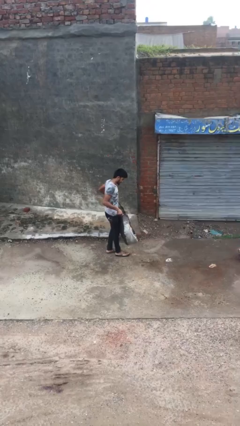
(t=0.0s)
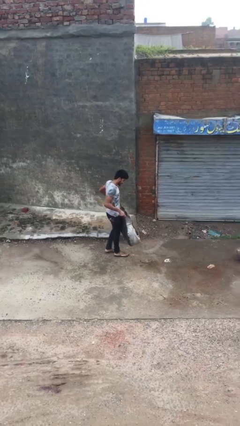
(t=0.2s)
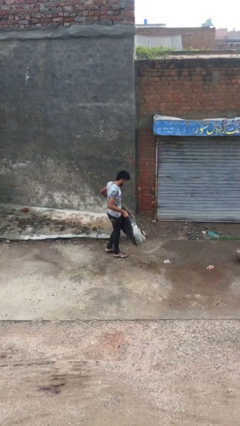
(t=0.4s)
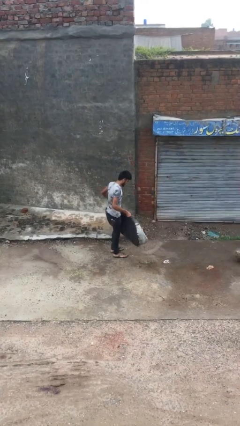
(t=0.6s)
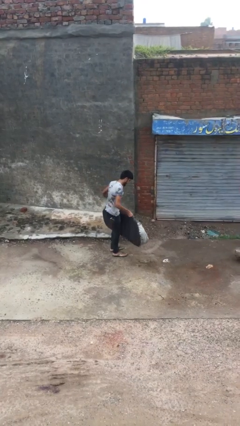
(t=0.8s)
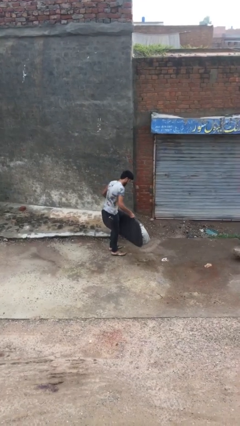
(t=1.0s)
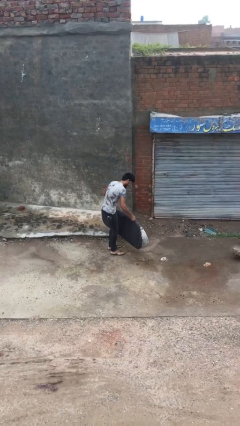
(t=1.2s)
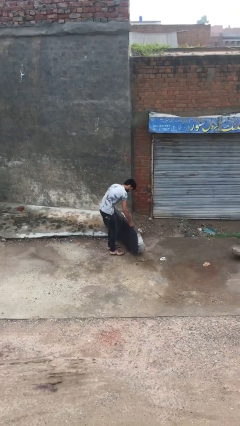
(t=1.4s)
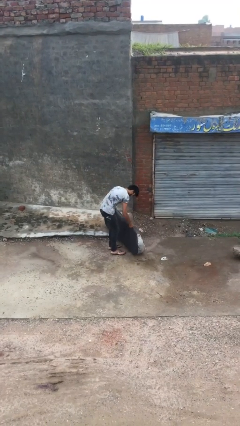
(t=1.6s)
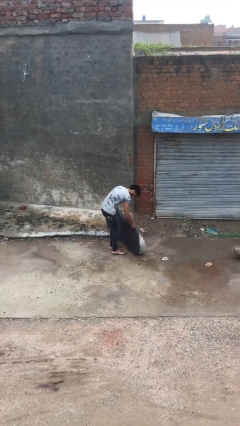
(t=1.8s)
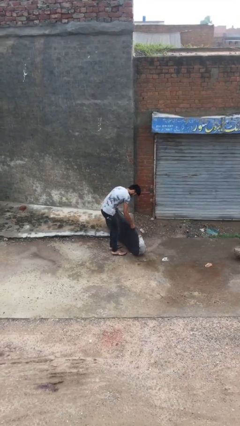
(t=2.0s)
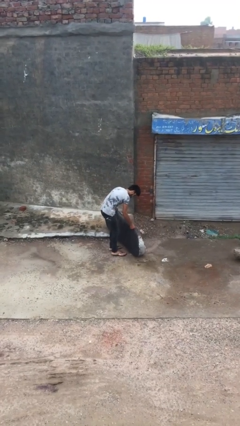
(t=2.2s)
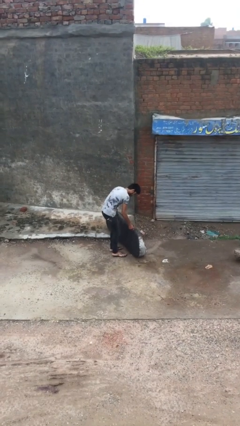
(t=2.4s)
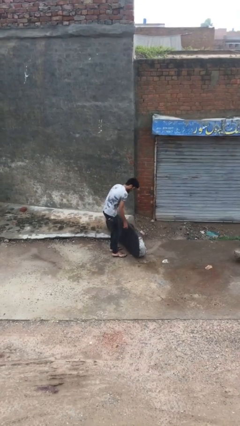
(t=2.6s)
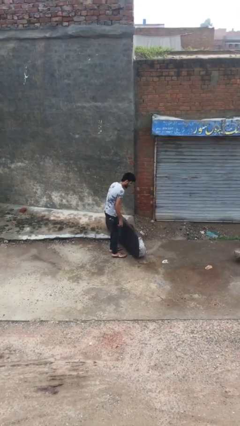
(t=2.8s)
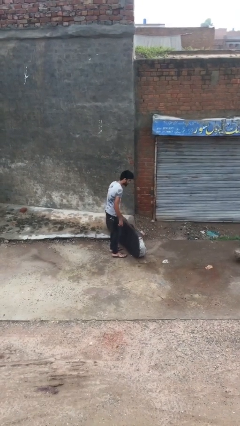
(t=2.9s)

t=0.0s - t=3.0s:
person puts down object on floor

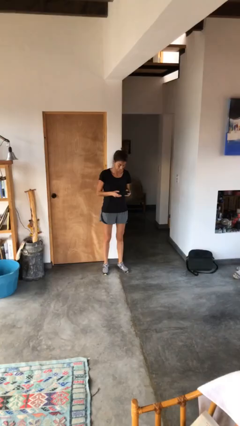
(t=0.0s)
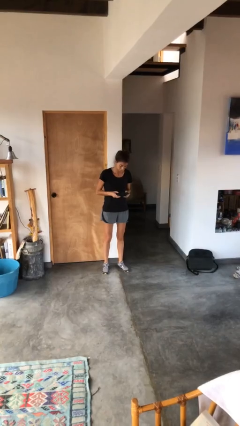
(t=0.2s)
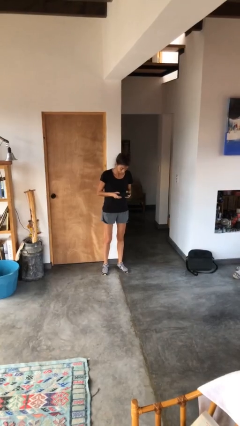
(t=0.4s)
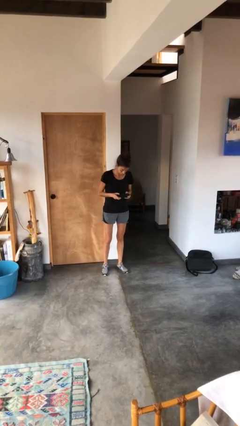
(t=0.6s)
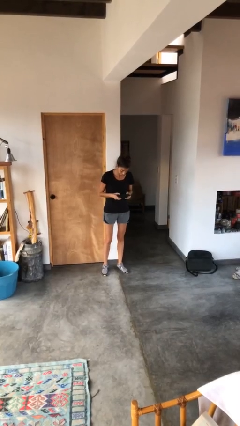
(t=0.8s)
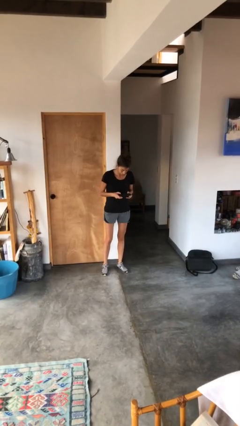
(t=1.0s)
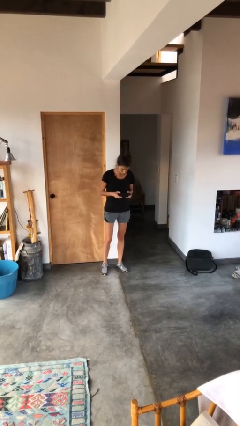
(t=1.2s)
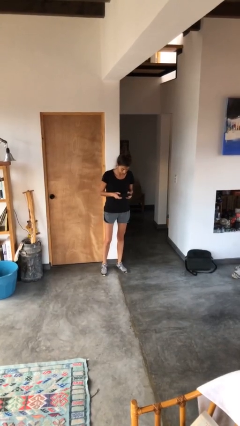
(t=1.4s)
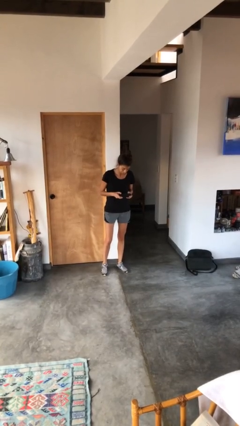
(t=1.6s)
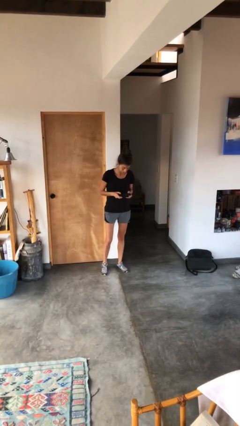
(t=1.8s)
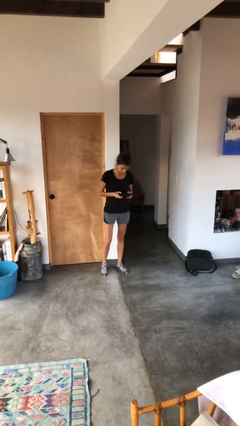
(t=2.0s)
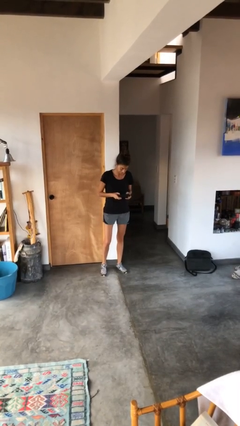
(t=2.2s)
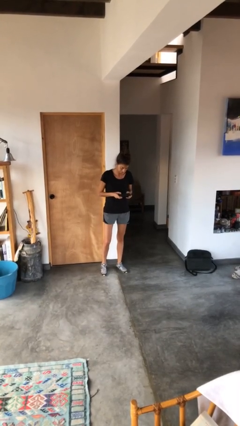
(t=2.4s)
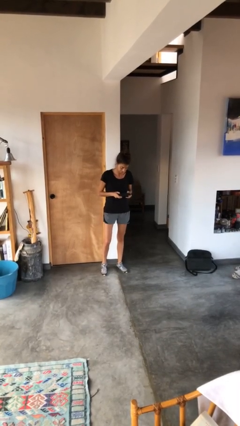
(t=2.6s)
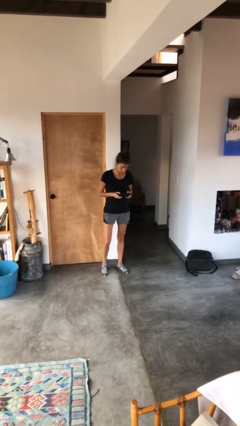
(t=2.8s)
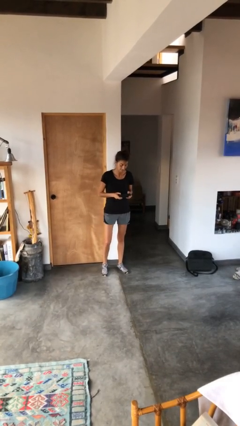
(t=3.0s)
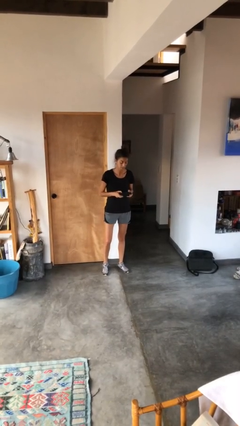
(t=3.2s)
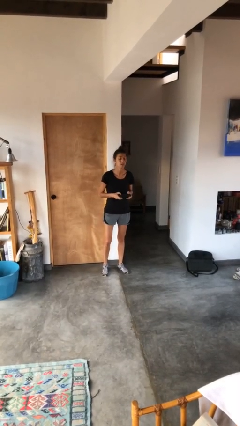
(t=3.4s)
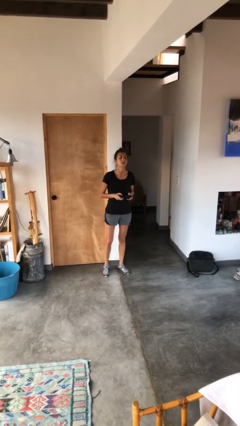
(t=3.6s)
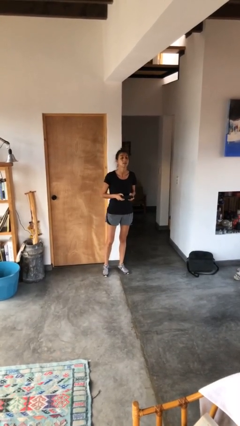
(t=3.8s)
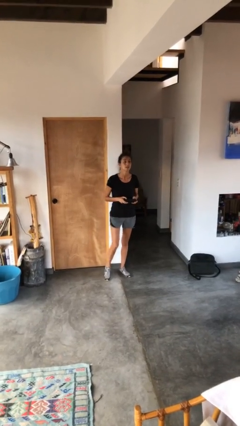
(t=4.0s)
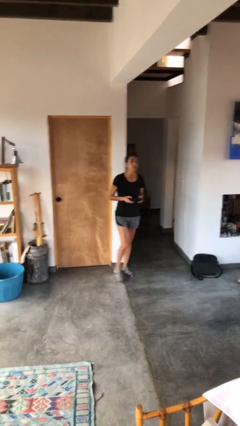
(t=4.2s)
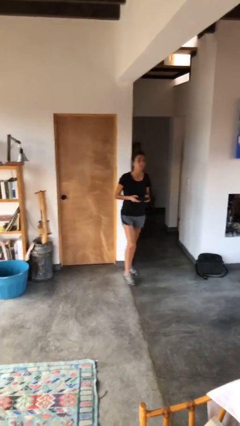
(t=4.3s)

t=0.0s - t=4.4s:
person interacts with handheld game

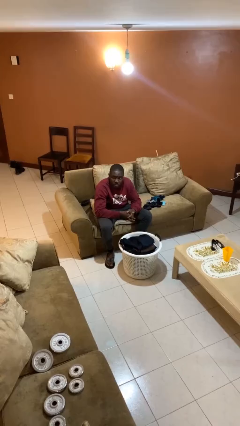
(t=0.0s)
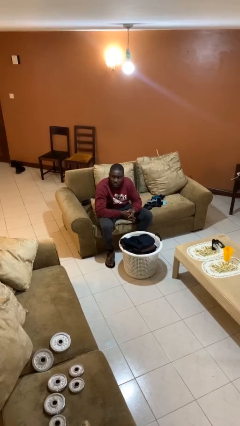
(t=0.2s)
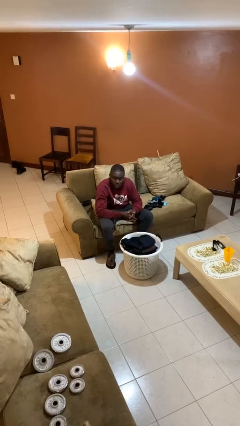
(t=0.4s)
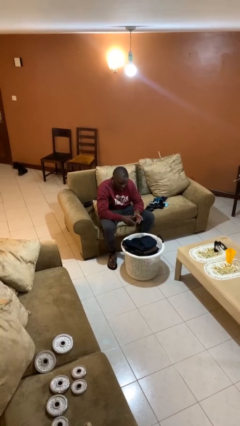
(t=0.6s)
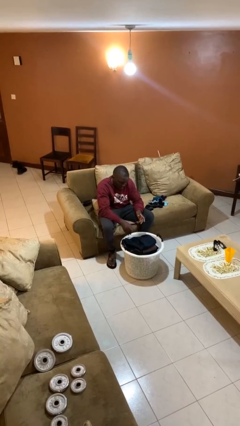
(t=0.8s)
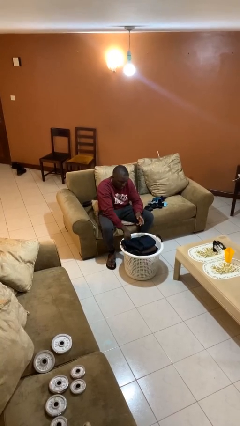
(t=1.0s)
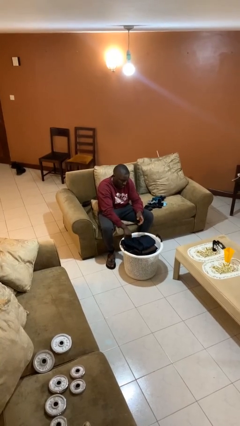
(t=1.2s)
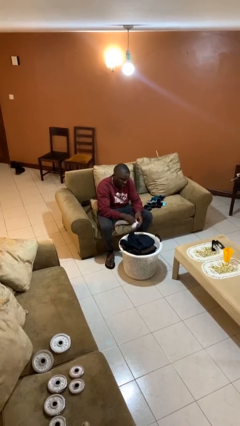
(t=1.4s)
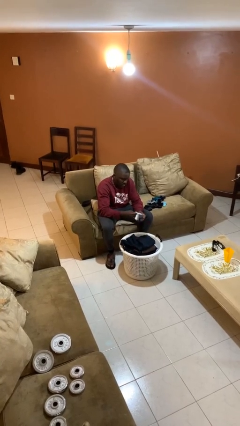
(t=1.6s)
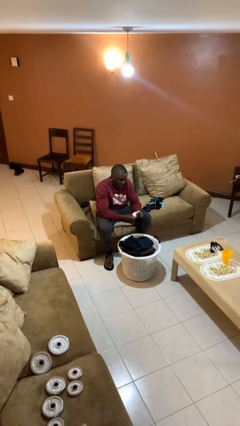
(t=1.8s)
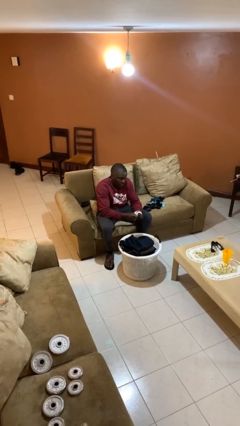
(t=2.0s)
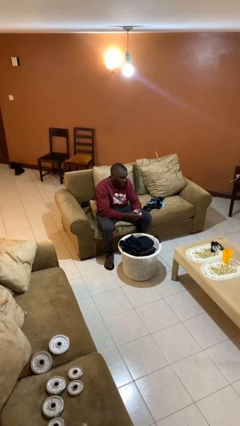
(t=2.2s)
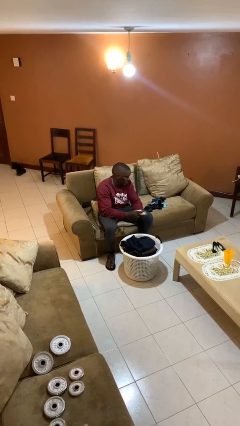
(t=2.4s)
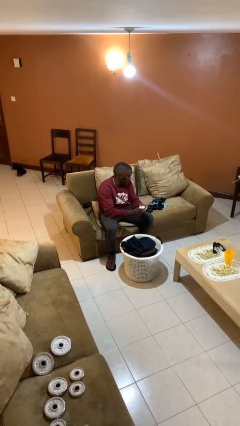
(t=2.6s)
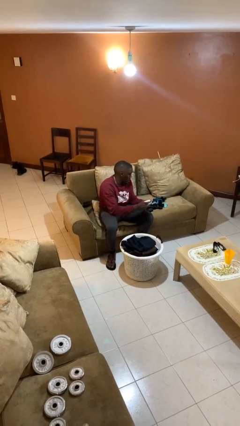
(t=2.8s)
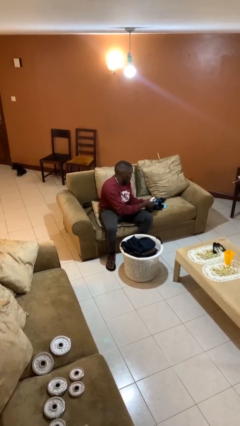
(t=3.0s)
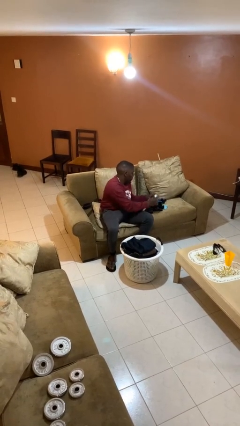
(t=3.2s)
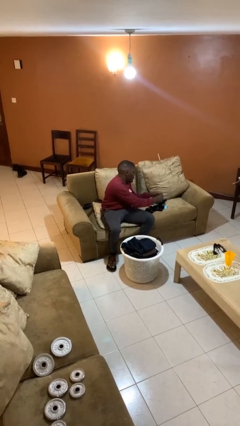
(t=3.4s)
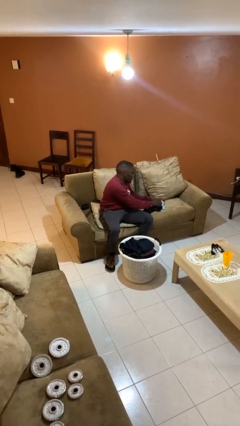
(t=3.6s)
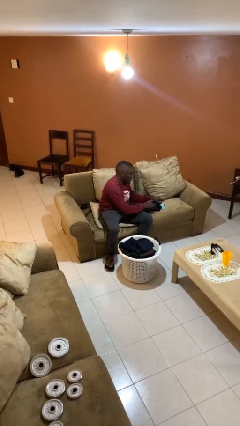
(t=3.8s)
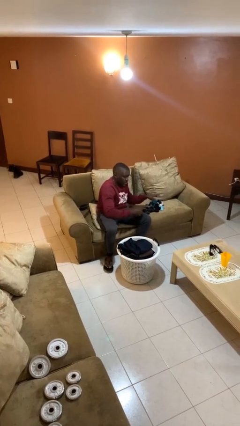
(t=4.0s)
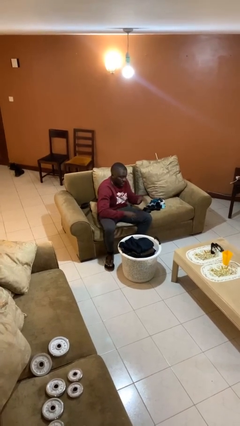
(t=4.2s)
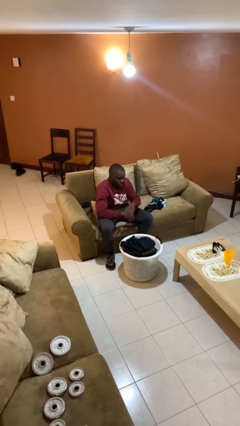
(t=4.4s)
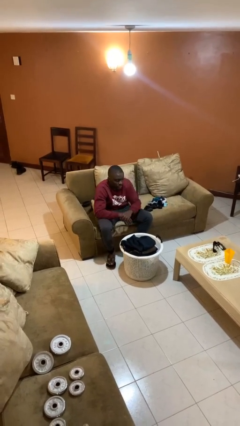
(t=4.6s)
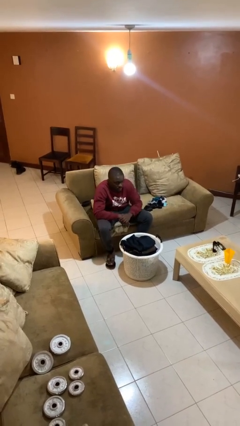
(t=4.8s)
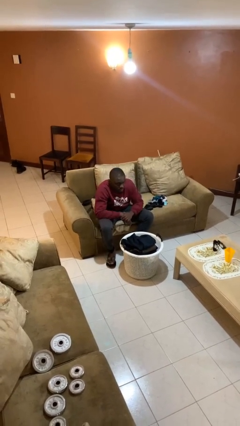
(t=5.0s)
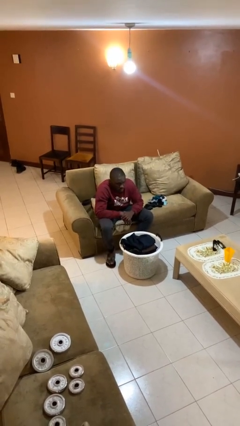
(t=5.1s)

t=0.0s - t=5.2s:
person folds socks

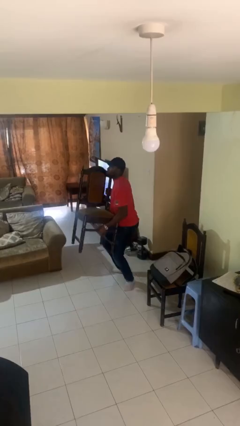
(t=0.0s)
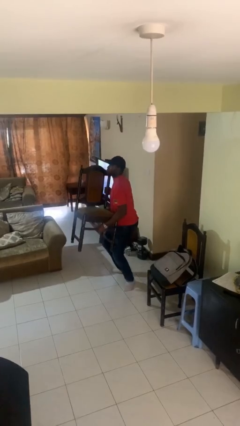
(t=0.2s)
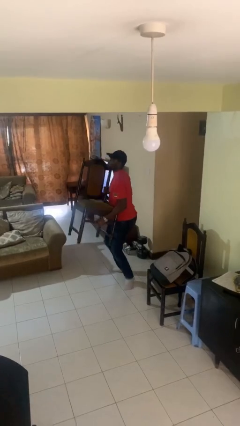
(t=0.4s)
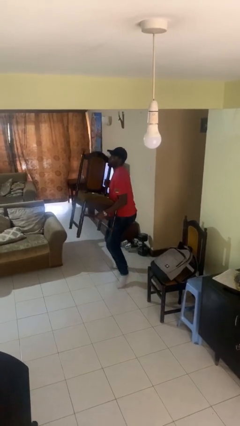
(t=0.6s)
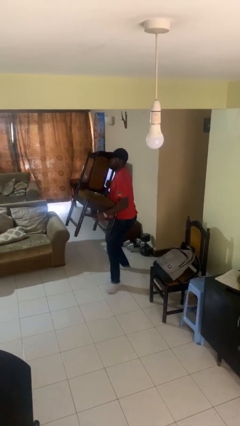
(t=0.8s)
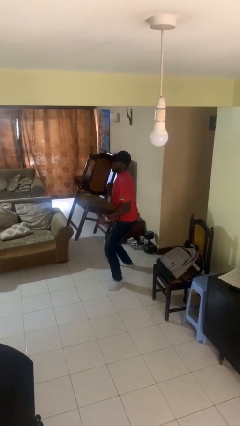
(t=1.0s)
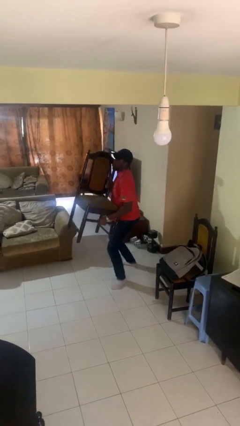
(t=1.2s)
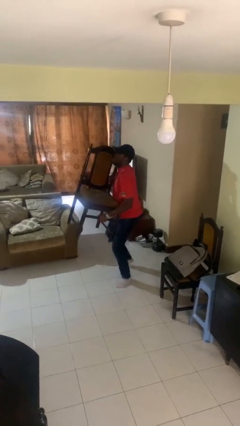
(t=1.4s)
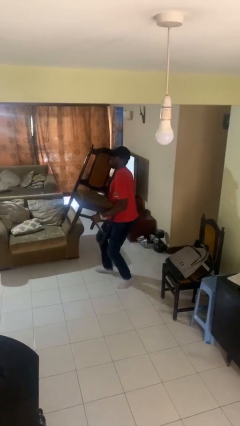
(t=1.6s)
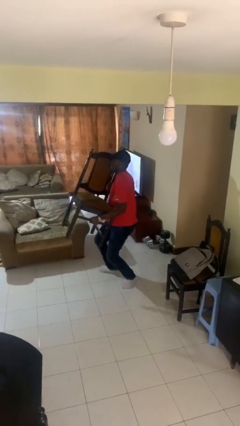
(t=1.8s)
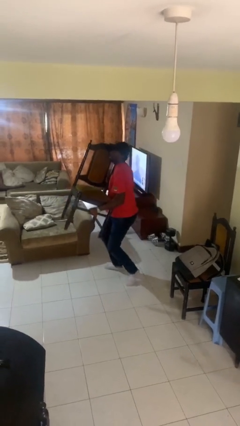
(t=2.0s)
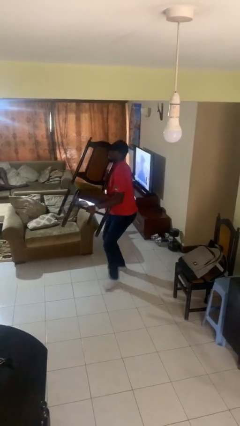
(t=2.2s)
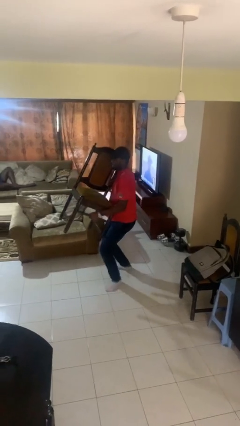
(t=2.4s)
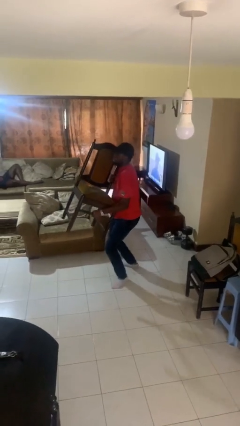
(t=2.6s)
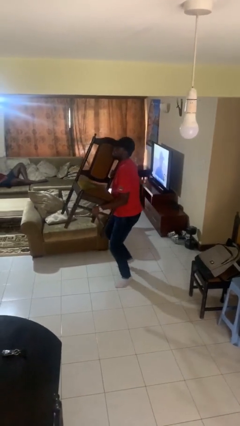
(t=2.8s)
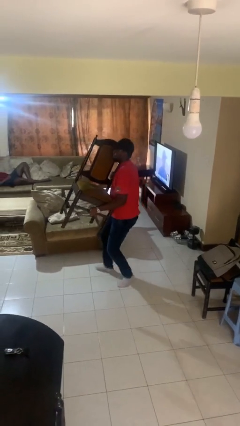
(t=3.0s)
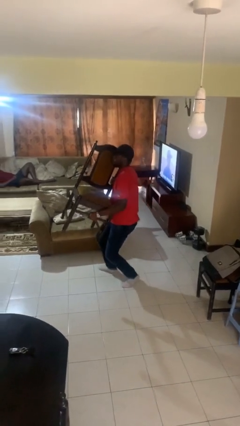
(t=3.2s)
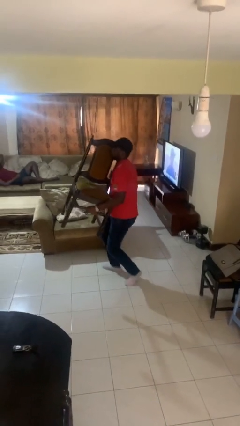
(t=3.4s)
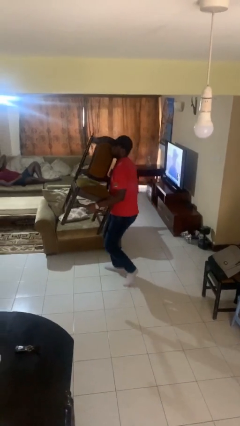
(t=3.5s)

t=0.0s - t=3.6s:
person carries heavy object

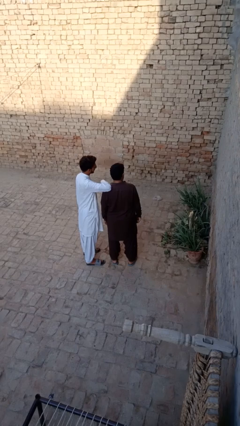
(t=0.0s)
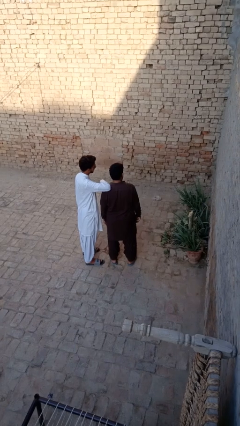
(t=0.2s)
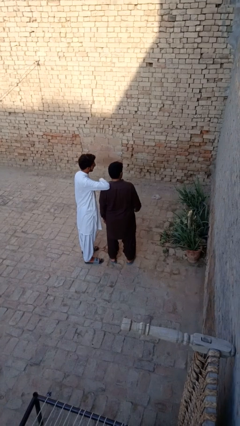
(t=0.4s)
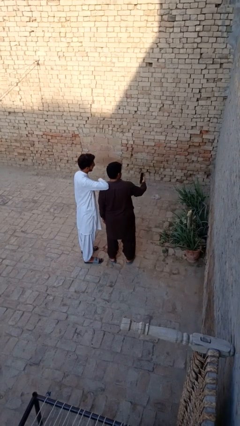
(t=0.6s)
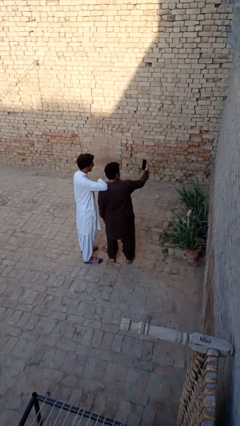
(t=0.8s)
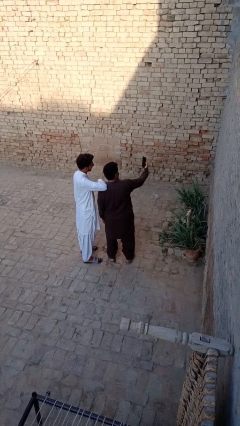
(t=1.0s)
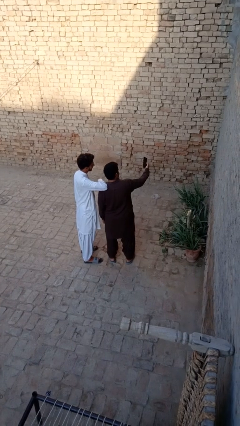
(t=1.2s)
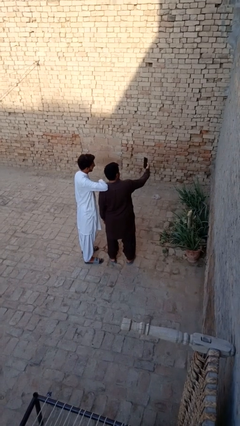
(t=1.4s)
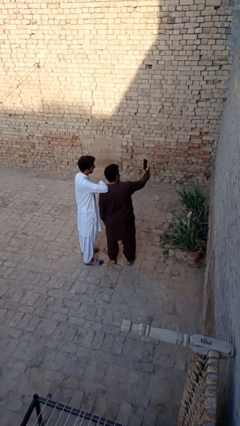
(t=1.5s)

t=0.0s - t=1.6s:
person takes selfie with person
